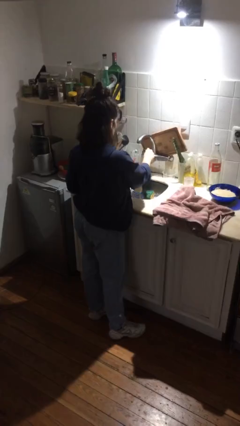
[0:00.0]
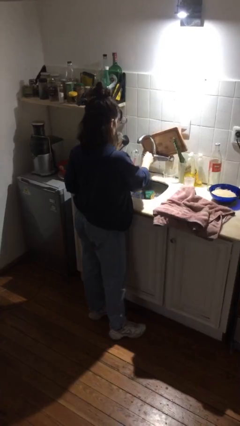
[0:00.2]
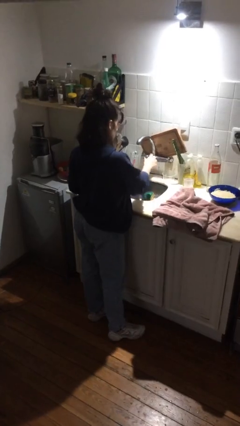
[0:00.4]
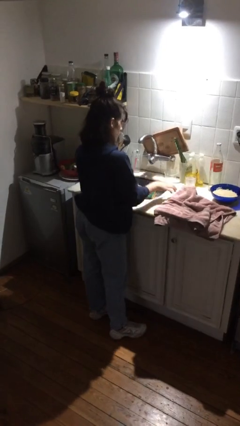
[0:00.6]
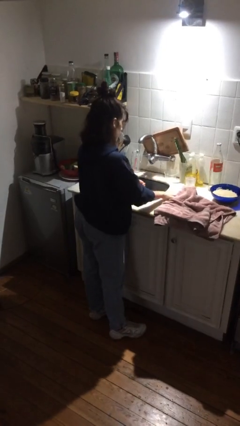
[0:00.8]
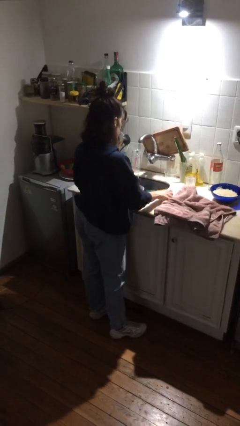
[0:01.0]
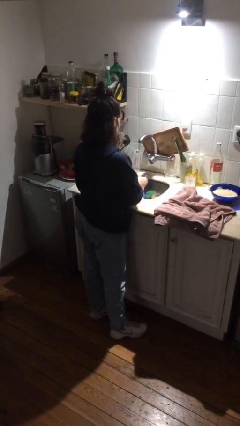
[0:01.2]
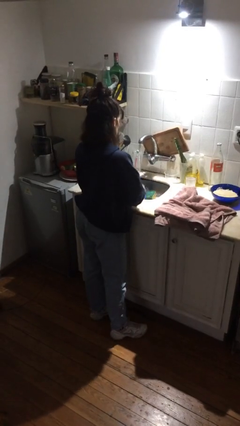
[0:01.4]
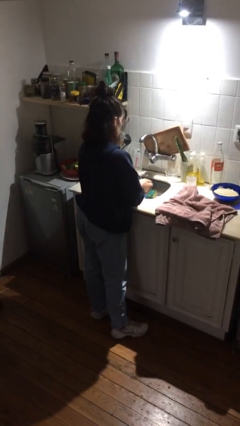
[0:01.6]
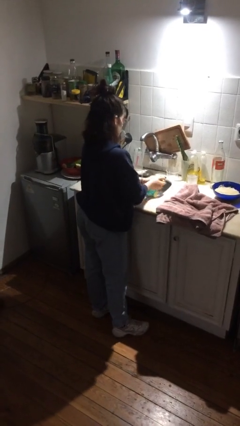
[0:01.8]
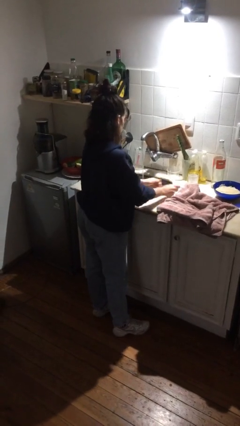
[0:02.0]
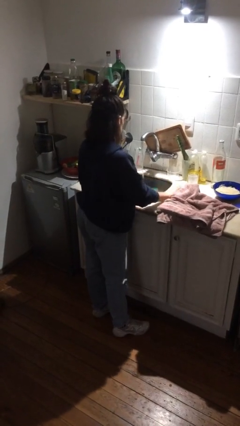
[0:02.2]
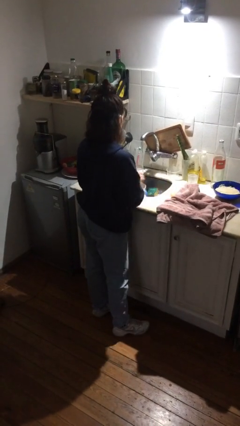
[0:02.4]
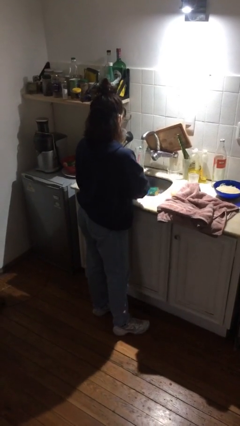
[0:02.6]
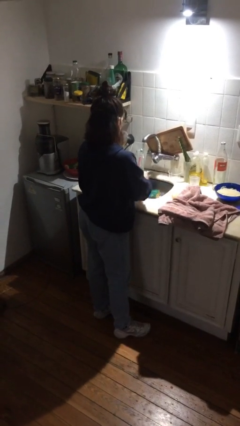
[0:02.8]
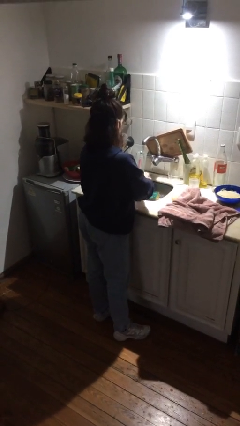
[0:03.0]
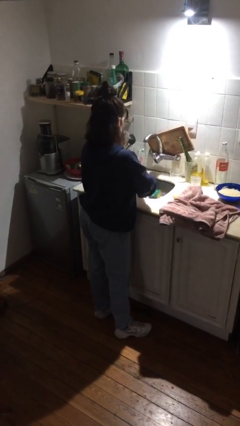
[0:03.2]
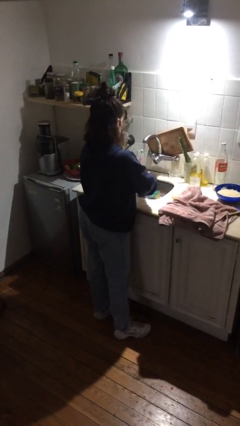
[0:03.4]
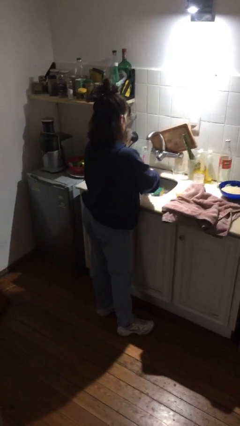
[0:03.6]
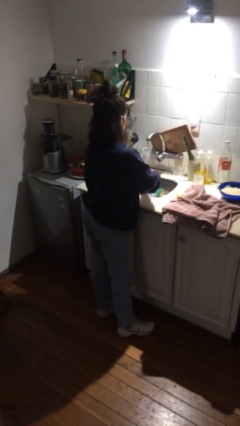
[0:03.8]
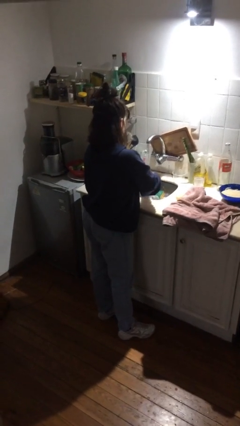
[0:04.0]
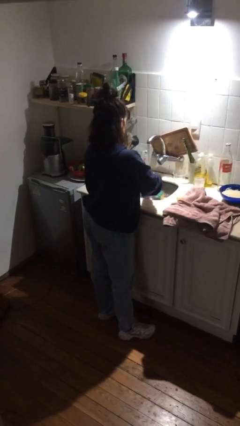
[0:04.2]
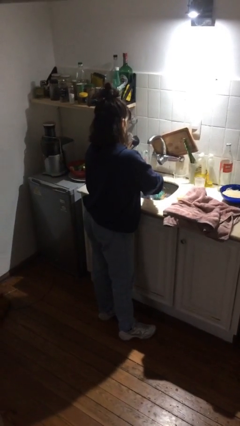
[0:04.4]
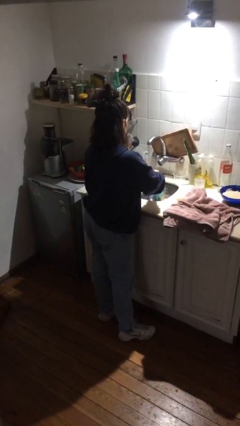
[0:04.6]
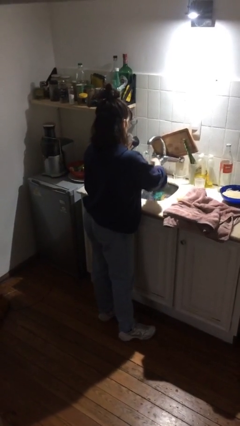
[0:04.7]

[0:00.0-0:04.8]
person washes hands

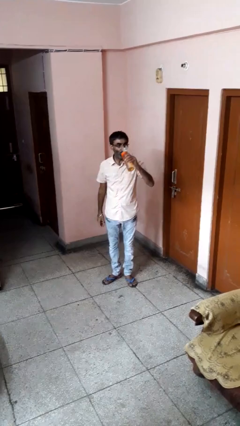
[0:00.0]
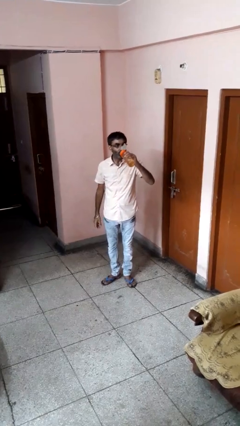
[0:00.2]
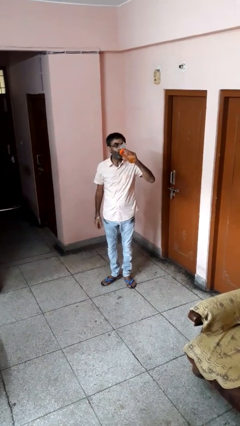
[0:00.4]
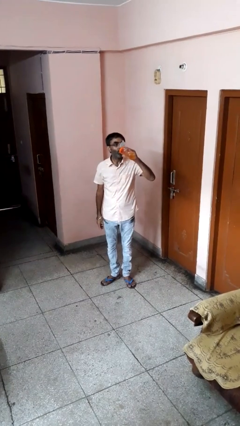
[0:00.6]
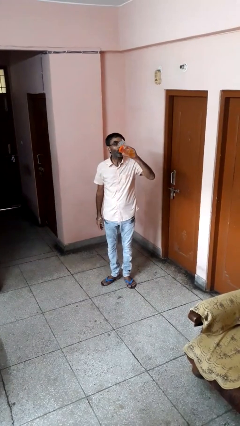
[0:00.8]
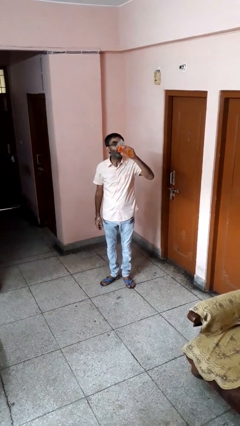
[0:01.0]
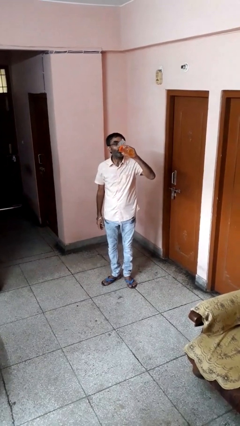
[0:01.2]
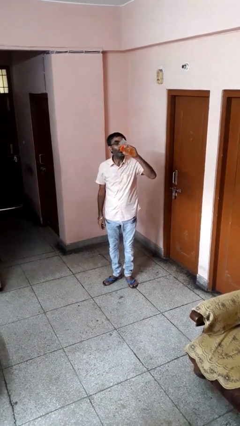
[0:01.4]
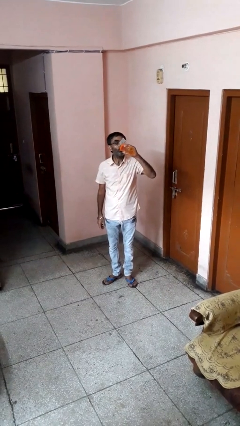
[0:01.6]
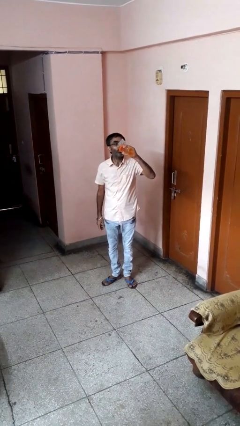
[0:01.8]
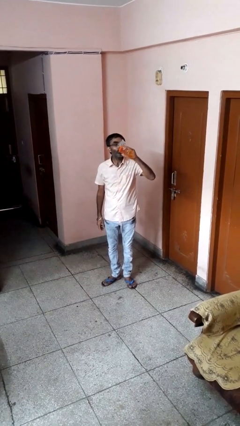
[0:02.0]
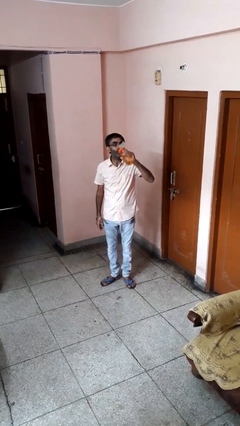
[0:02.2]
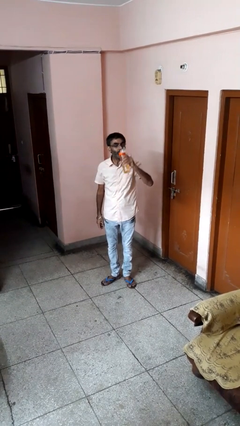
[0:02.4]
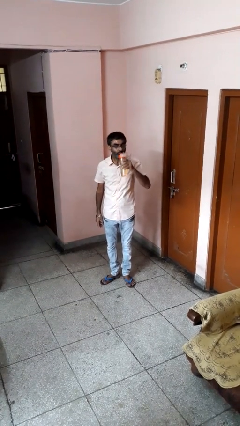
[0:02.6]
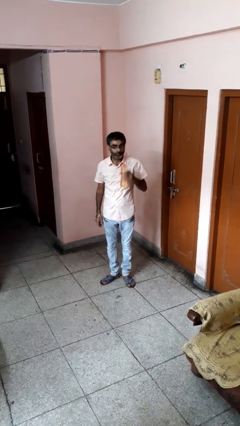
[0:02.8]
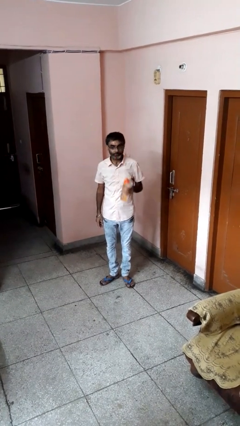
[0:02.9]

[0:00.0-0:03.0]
person drinks from bottle

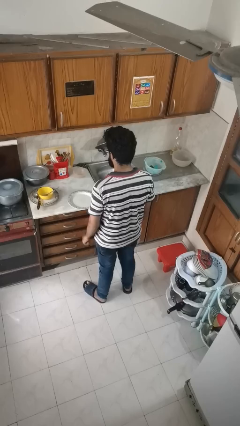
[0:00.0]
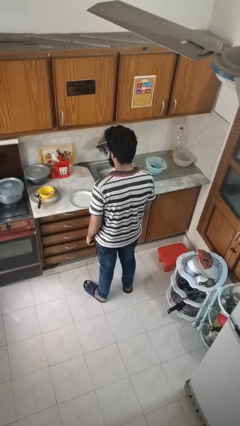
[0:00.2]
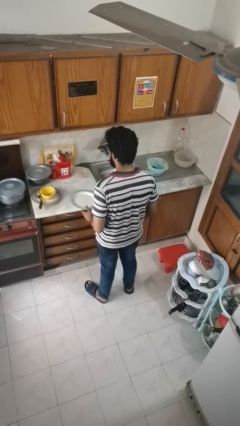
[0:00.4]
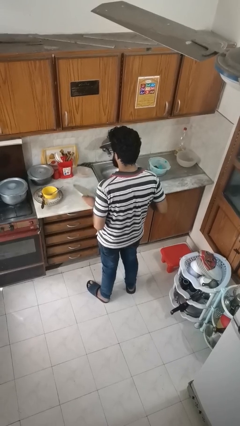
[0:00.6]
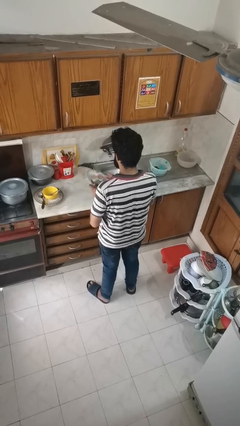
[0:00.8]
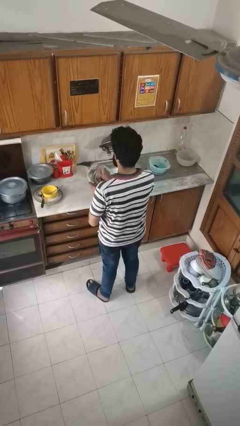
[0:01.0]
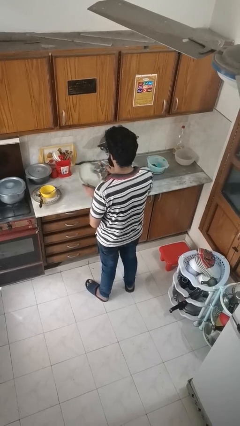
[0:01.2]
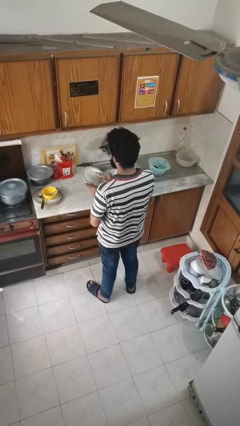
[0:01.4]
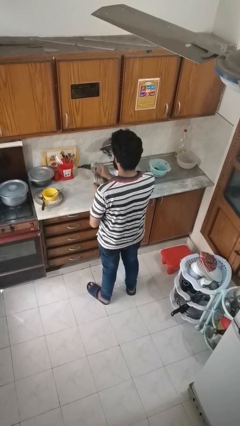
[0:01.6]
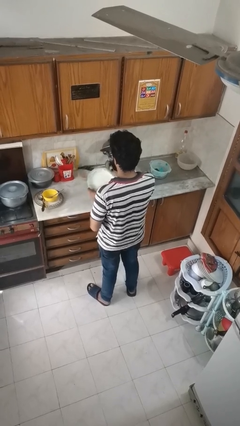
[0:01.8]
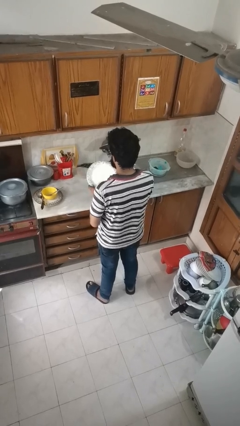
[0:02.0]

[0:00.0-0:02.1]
person dries dish

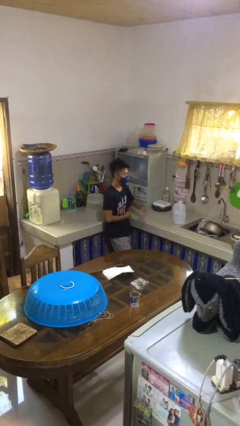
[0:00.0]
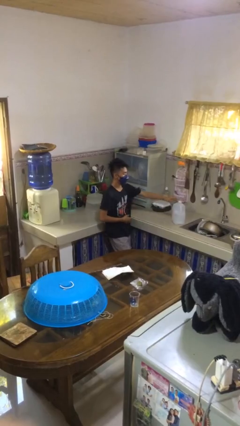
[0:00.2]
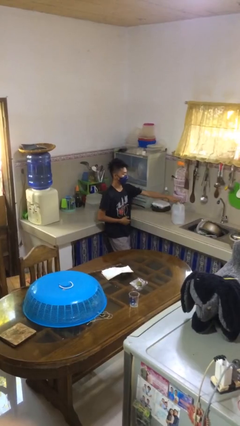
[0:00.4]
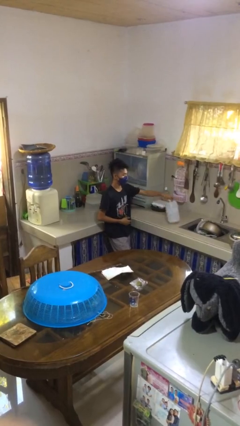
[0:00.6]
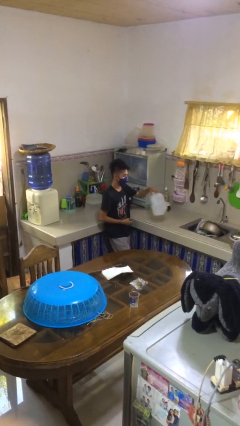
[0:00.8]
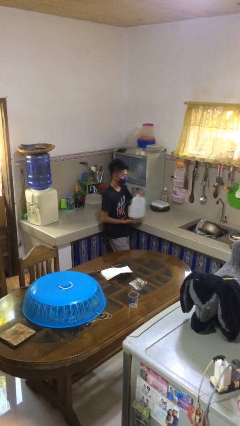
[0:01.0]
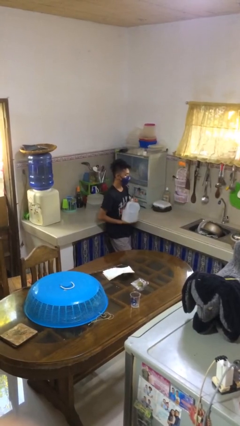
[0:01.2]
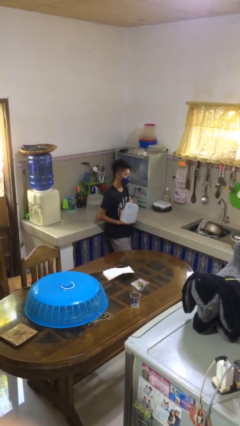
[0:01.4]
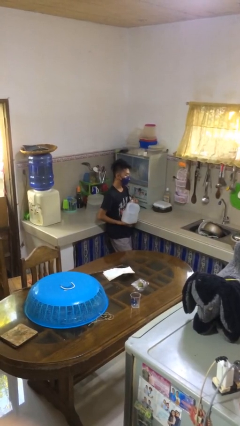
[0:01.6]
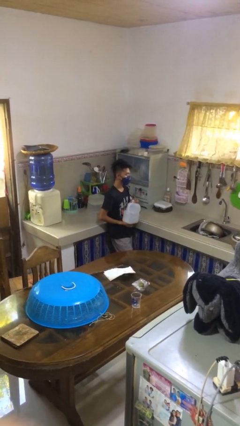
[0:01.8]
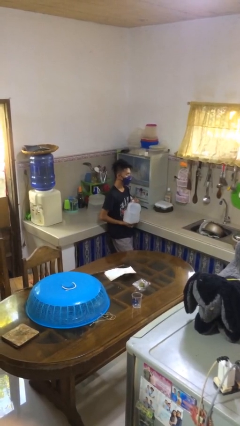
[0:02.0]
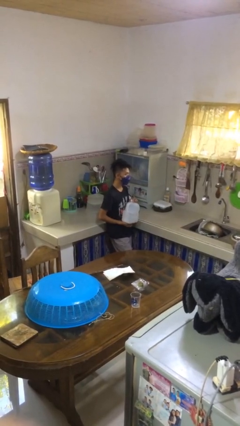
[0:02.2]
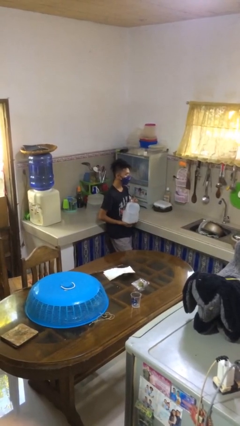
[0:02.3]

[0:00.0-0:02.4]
person picks up object from countertop

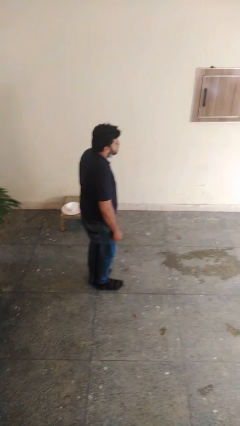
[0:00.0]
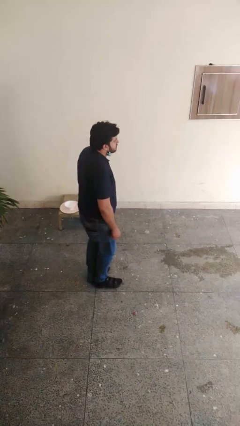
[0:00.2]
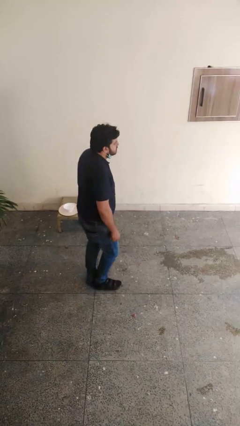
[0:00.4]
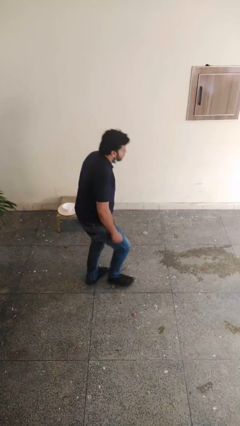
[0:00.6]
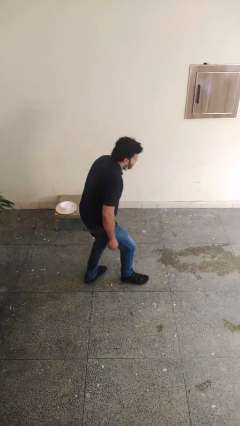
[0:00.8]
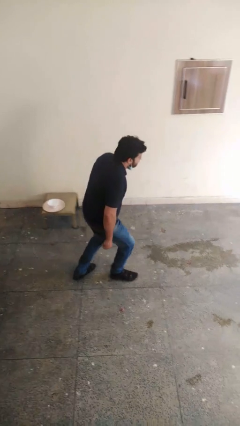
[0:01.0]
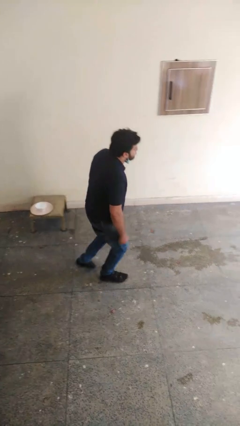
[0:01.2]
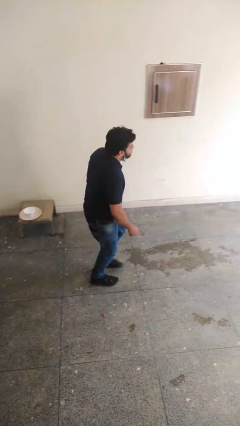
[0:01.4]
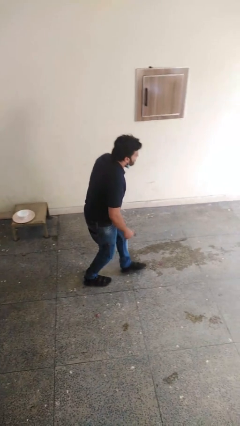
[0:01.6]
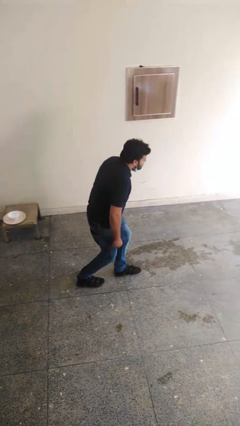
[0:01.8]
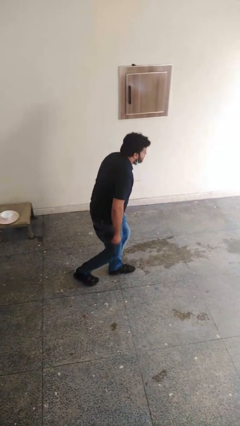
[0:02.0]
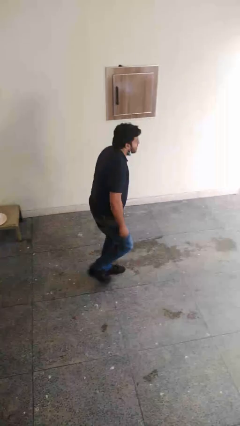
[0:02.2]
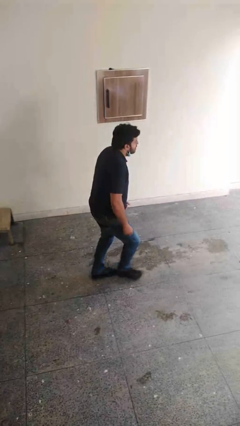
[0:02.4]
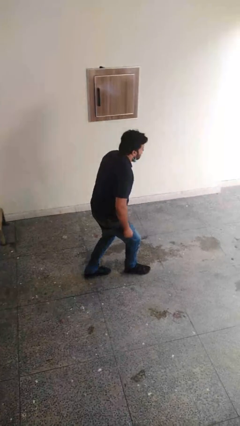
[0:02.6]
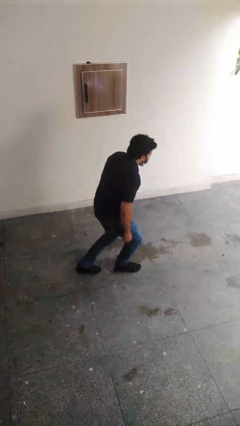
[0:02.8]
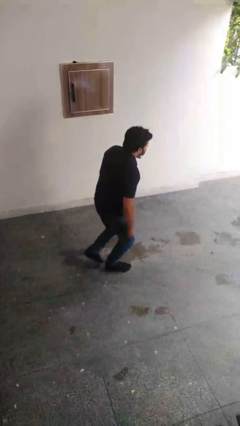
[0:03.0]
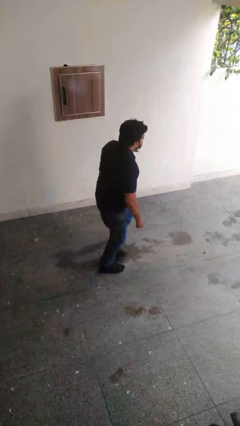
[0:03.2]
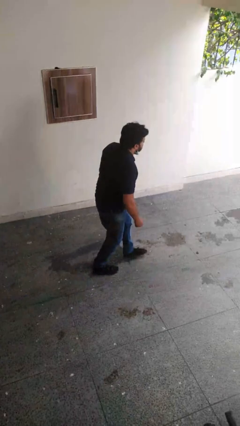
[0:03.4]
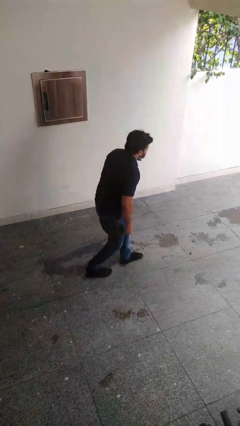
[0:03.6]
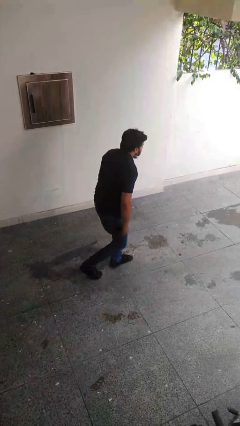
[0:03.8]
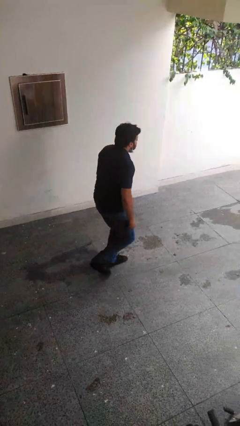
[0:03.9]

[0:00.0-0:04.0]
person walks tiptoe

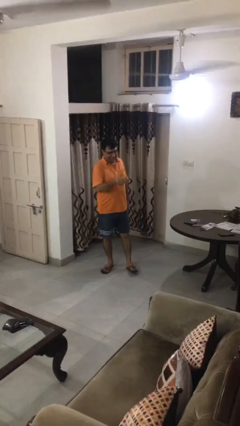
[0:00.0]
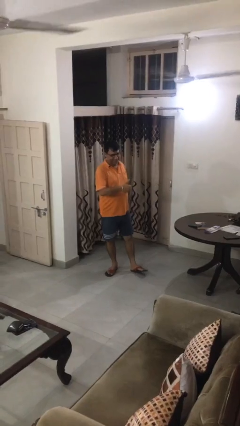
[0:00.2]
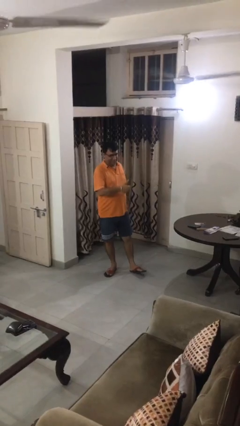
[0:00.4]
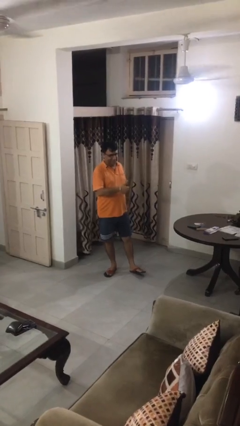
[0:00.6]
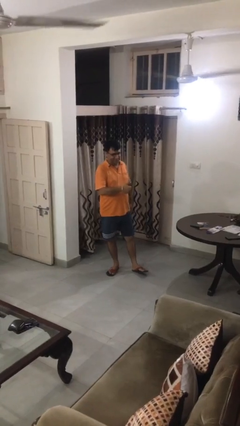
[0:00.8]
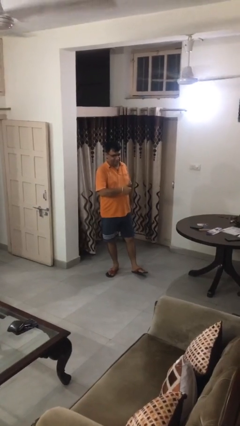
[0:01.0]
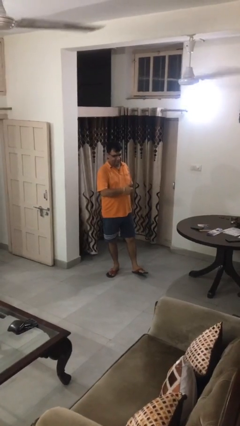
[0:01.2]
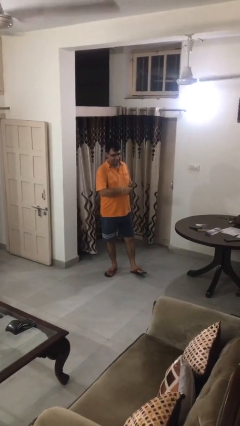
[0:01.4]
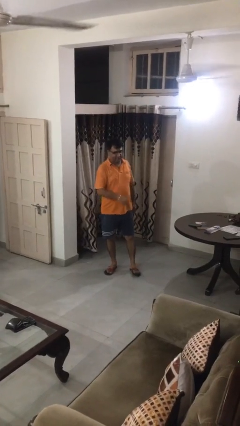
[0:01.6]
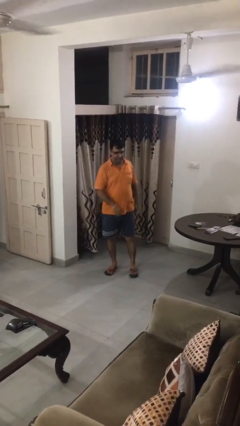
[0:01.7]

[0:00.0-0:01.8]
person gestures thumbs up
